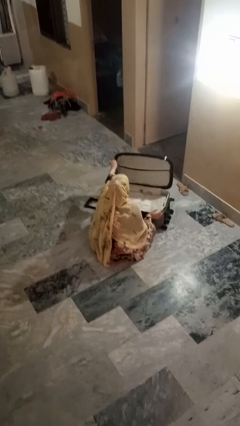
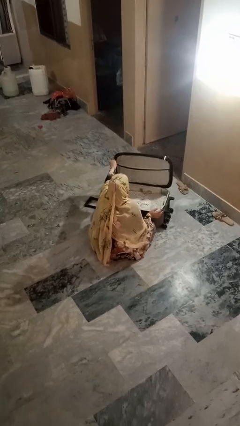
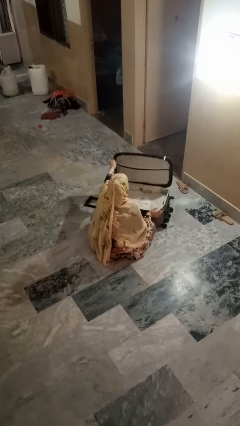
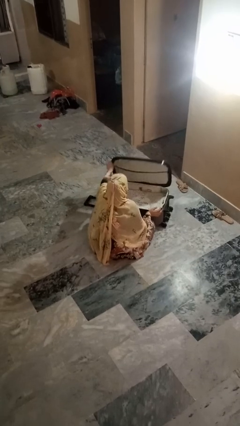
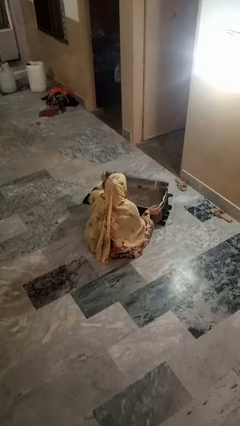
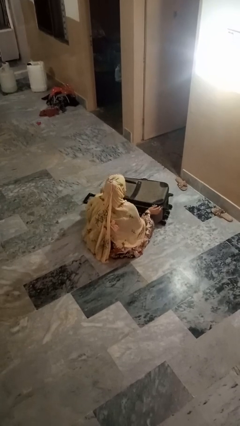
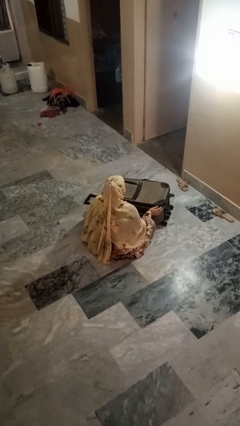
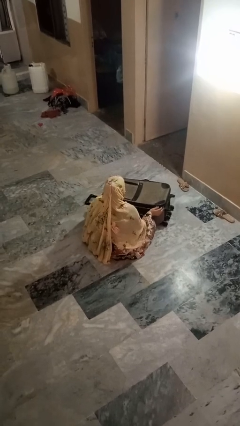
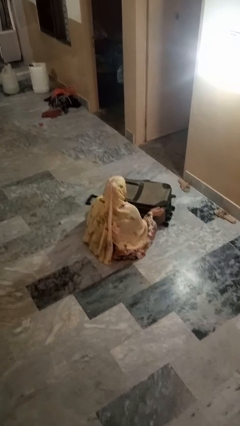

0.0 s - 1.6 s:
person closes suitcase

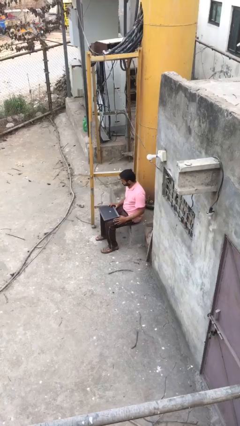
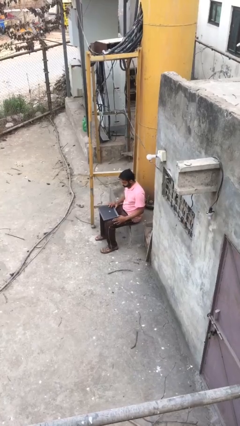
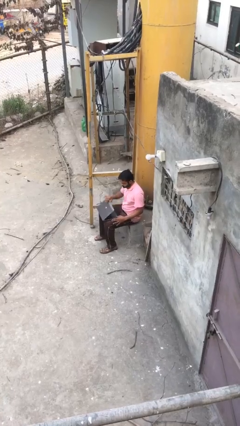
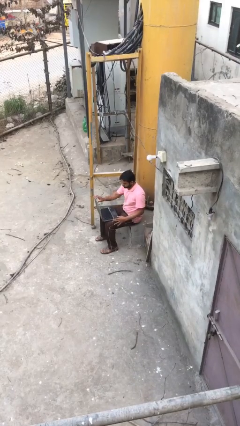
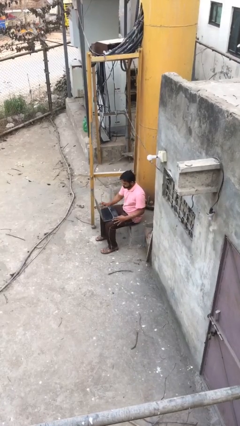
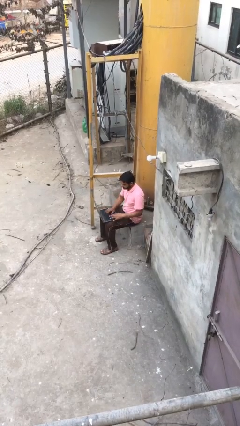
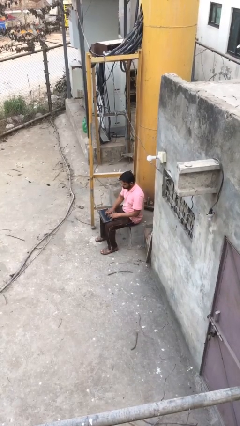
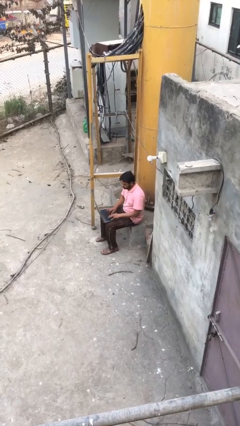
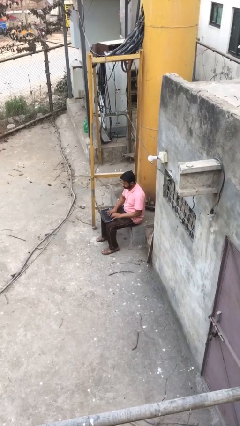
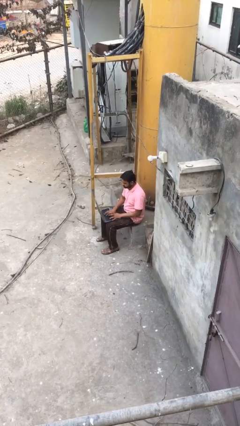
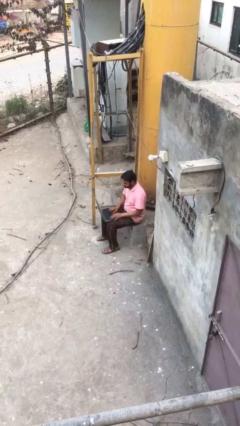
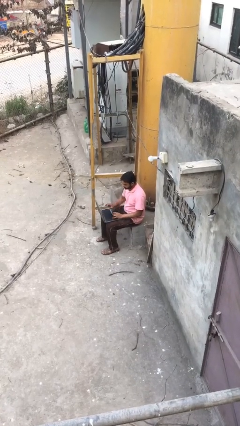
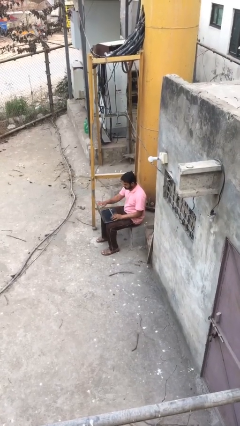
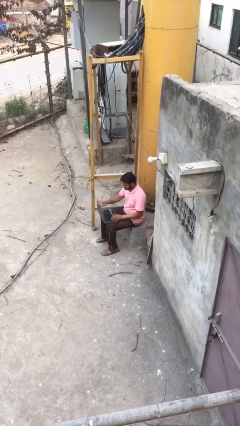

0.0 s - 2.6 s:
person interacts with laptop

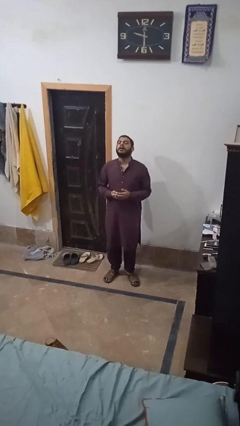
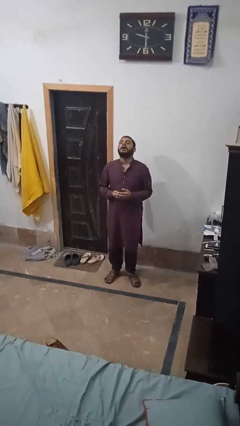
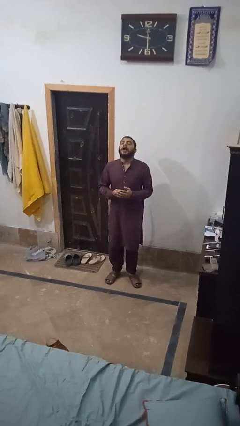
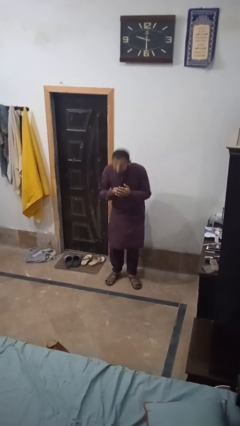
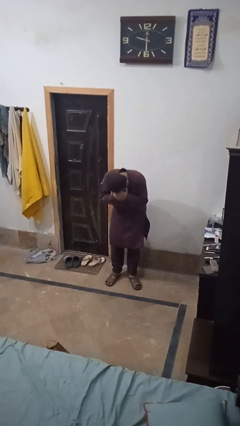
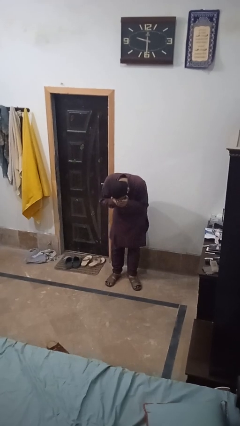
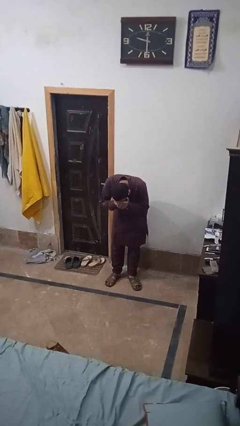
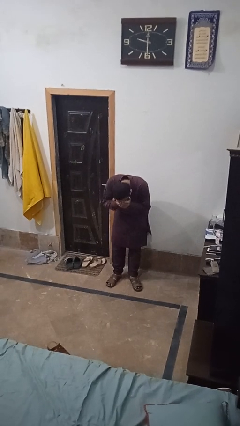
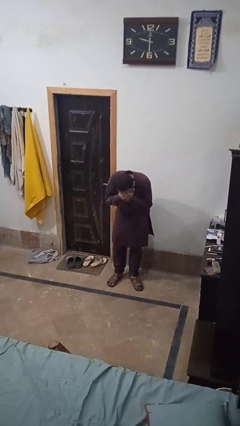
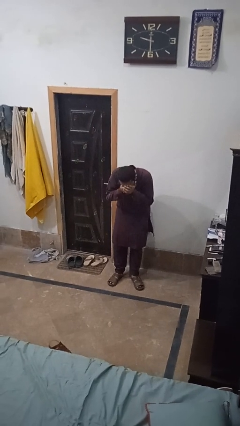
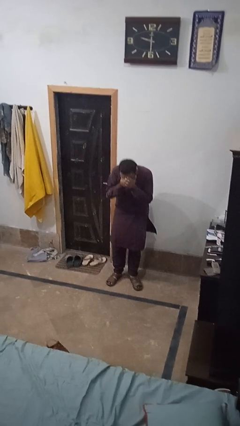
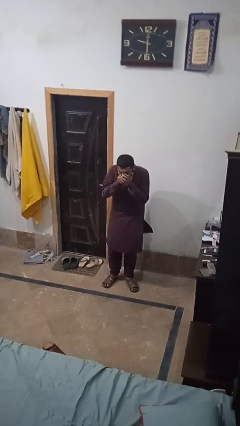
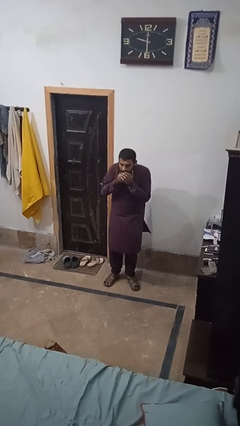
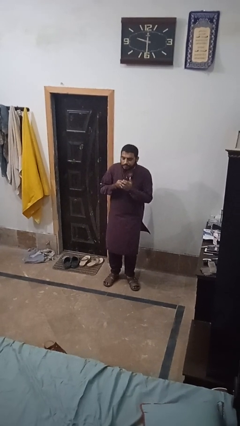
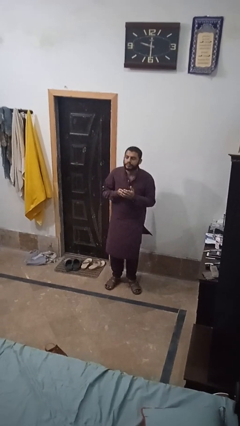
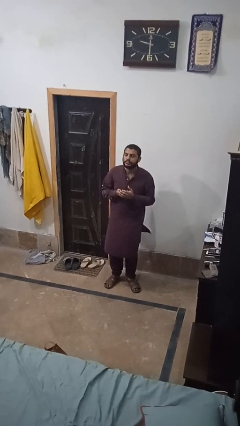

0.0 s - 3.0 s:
person sneezes into hand

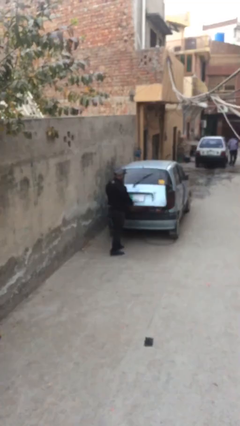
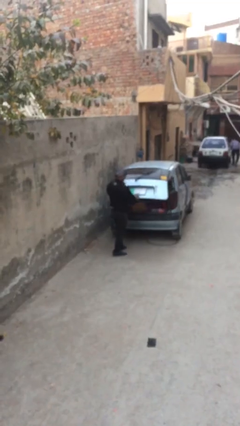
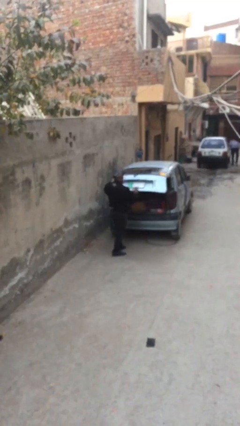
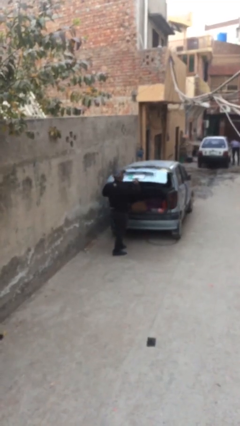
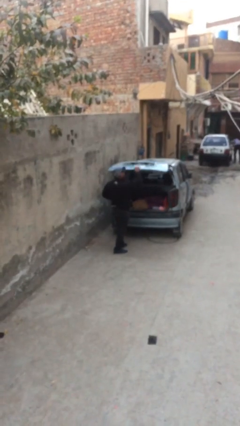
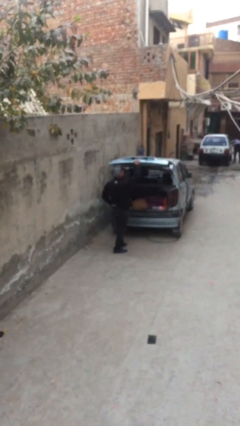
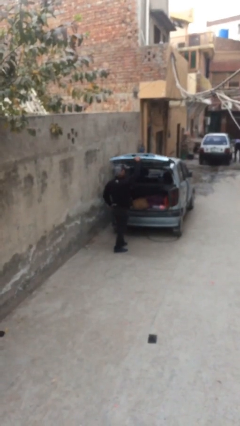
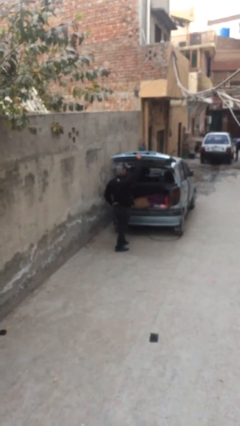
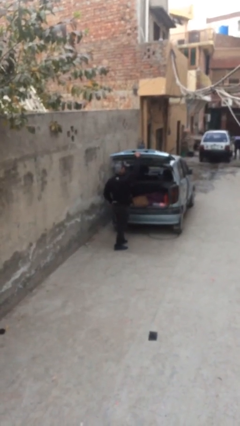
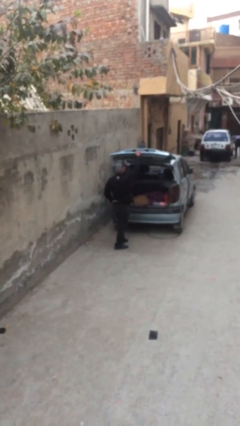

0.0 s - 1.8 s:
person opens car trunk

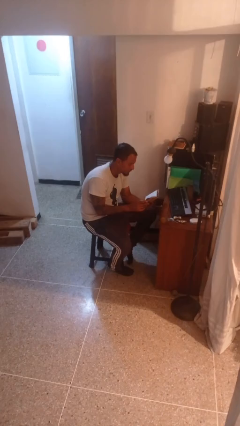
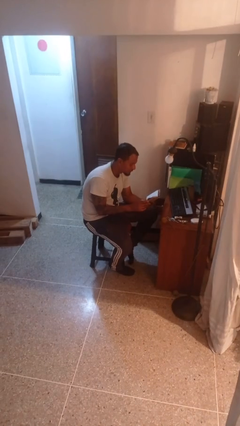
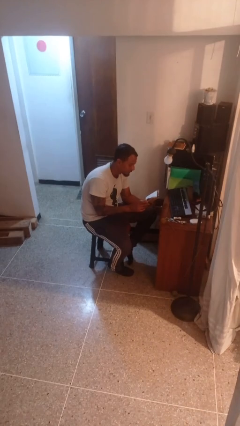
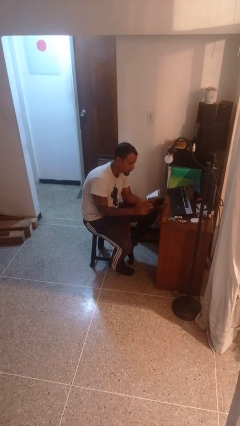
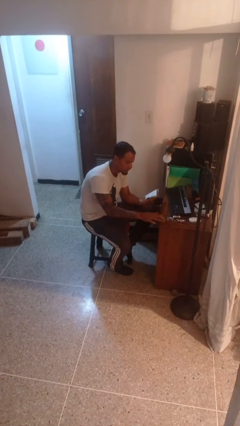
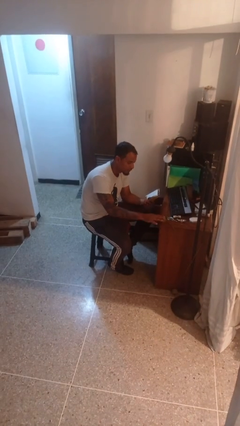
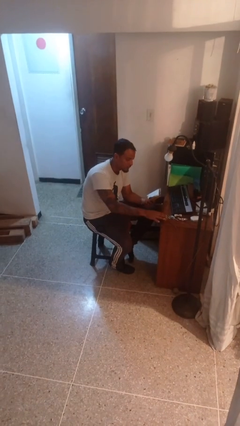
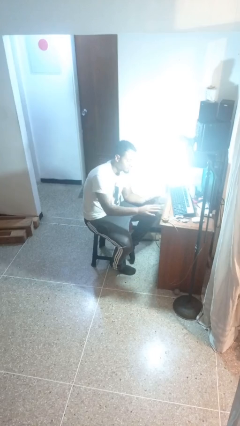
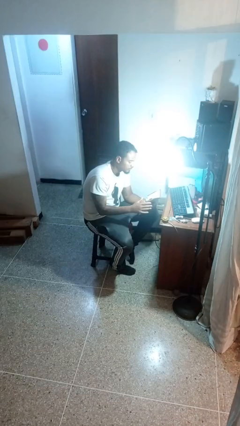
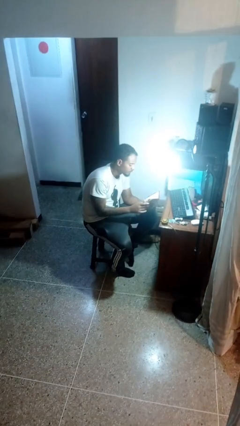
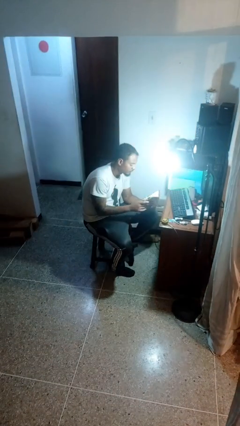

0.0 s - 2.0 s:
person turns on lamp

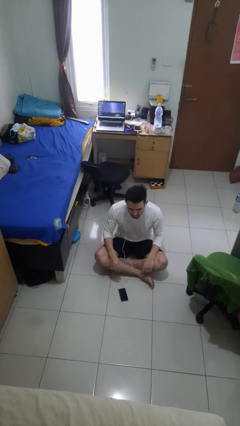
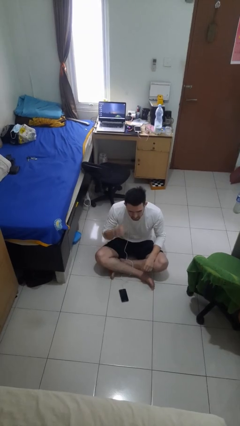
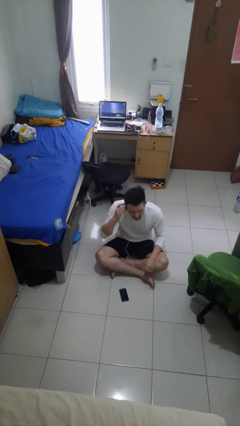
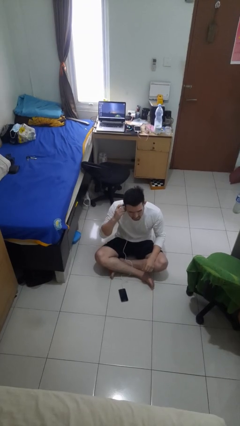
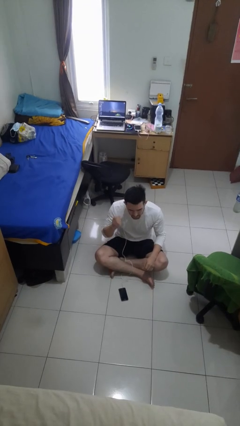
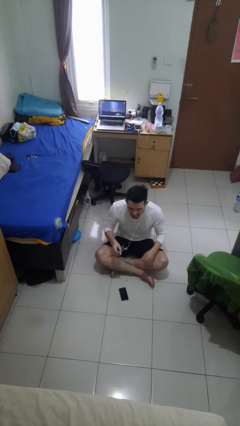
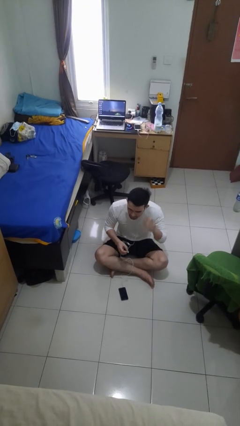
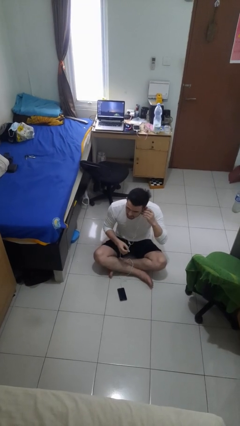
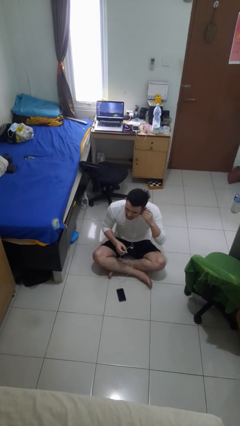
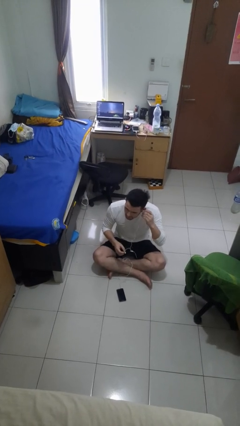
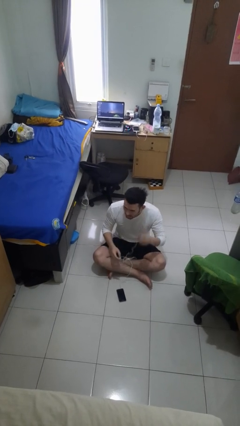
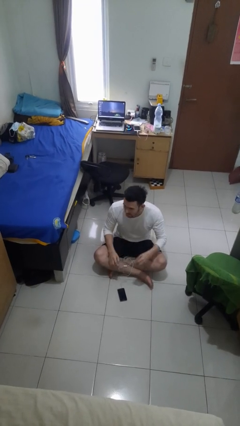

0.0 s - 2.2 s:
person takes off headphones

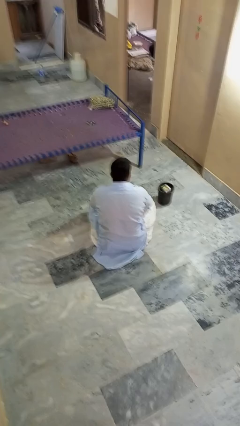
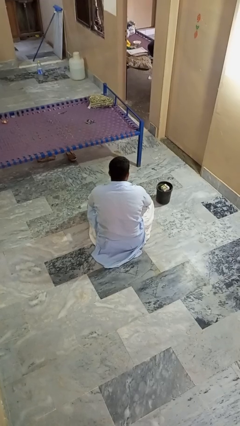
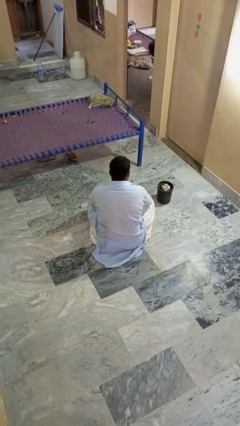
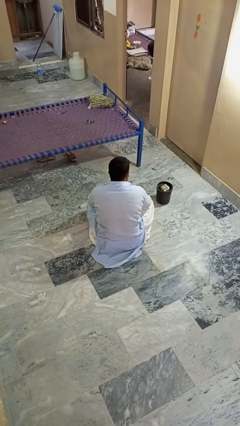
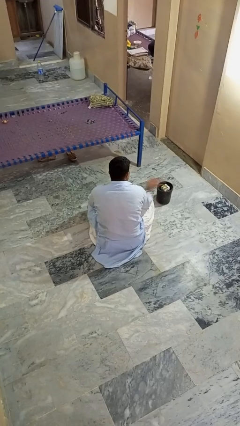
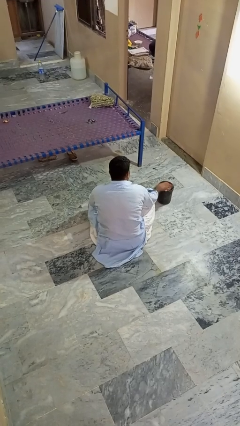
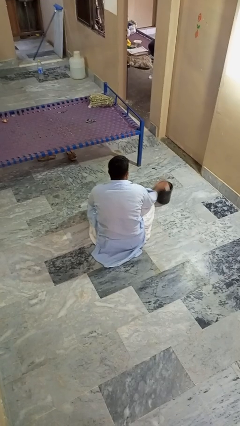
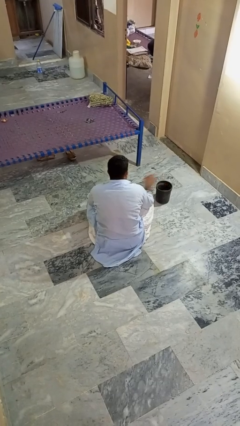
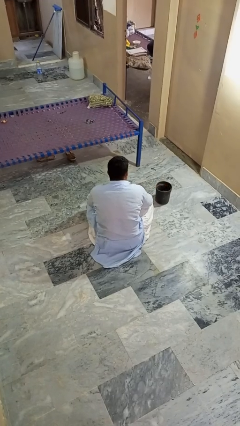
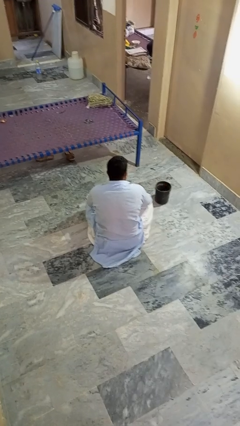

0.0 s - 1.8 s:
person takes object from basket

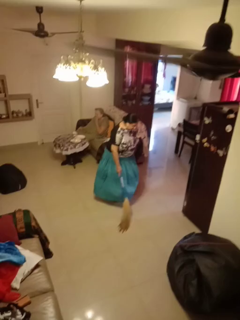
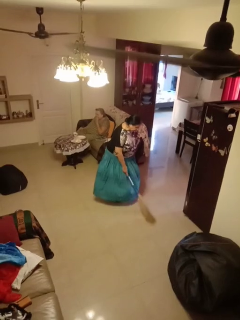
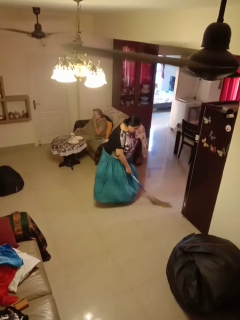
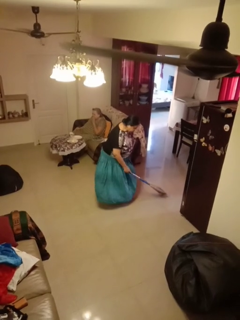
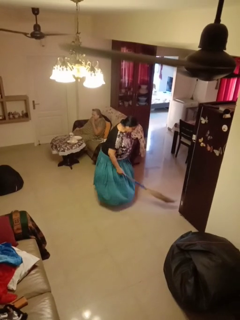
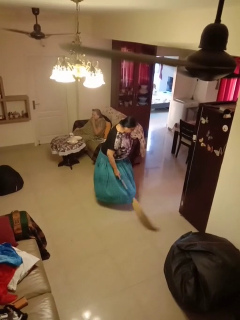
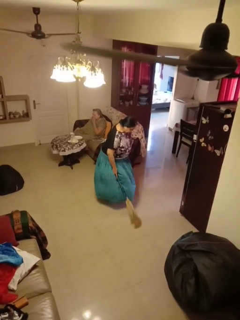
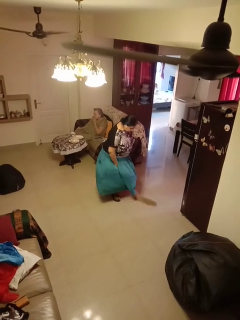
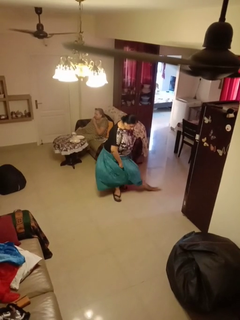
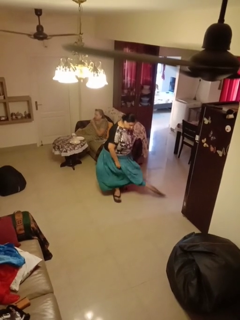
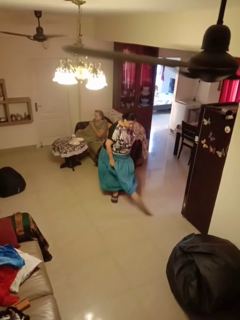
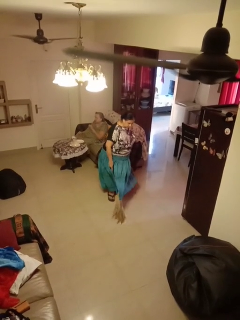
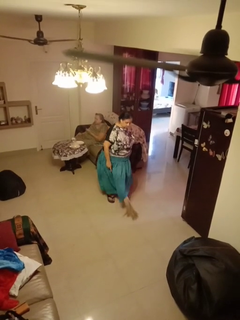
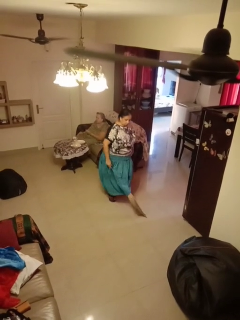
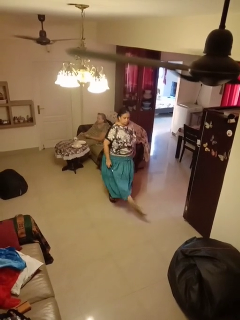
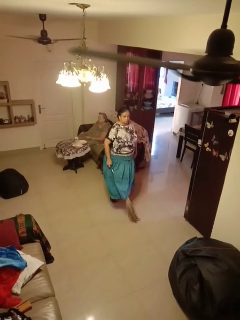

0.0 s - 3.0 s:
person sweeps floor
